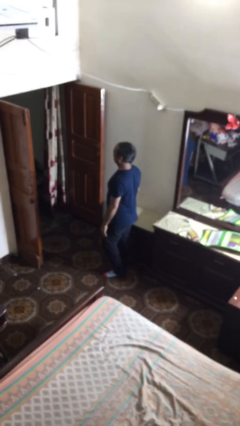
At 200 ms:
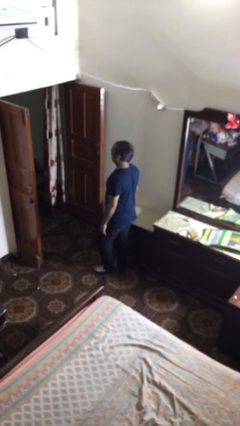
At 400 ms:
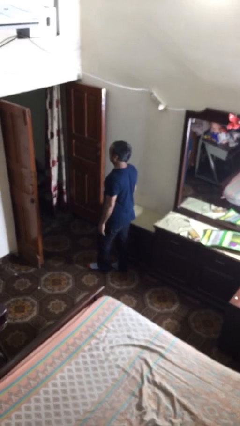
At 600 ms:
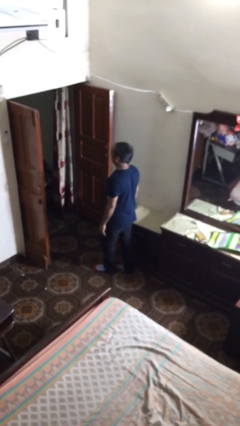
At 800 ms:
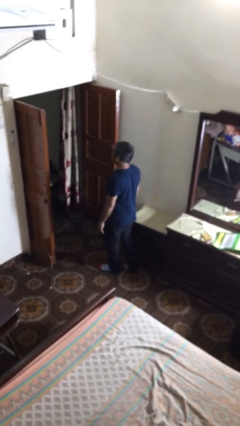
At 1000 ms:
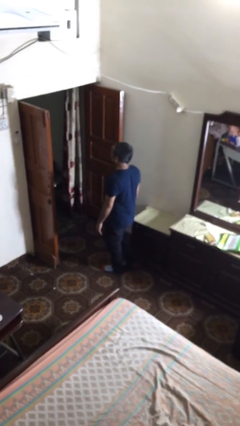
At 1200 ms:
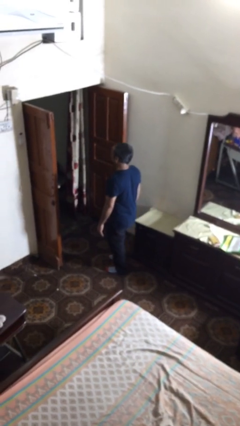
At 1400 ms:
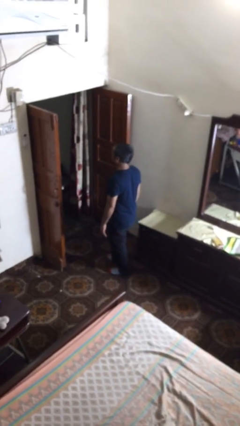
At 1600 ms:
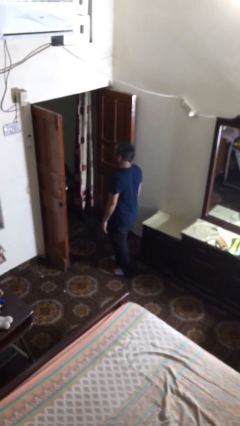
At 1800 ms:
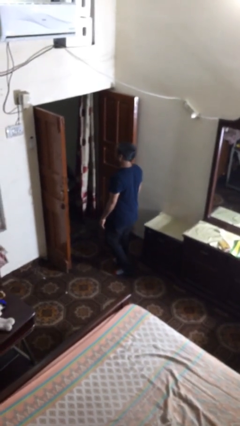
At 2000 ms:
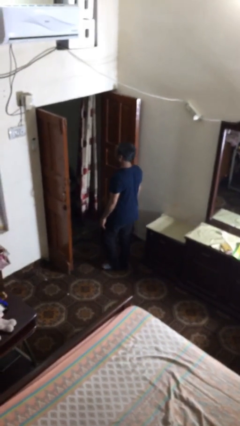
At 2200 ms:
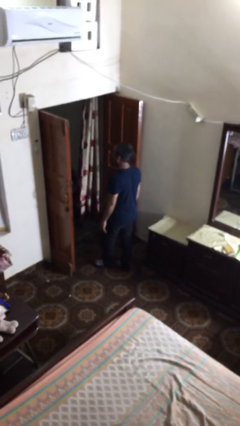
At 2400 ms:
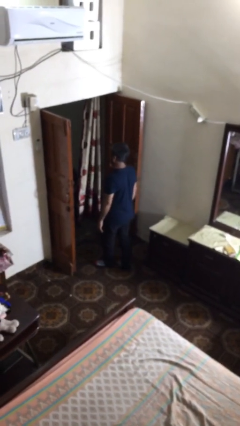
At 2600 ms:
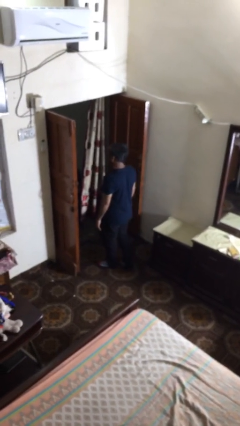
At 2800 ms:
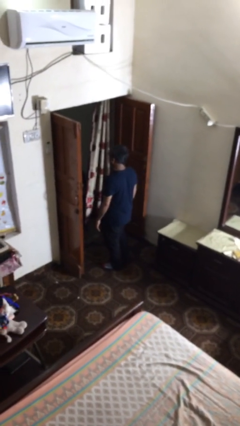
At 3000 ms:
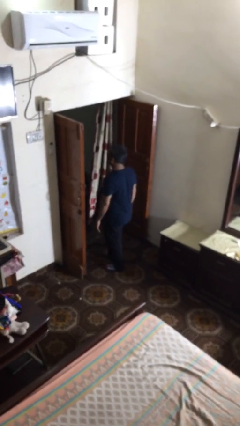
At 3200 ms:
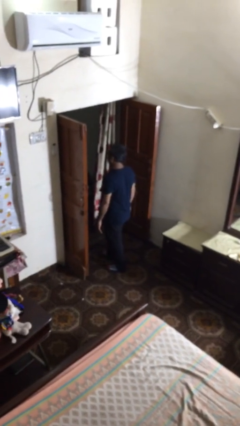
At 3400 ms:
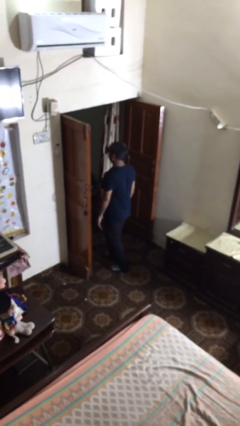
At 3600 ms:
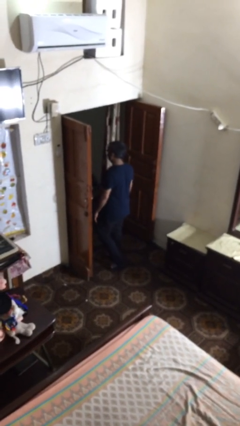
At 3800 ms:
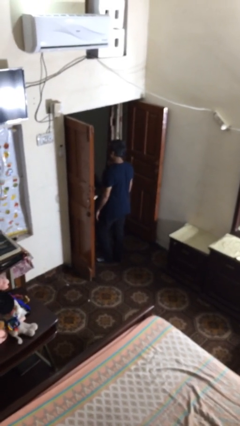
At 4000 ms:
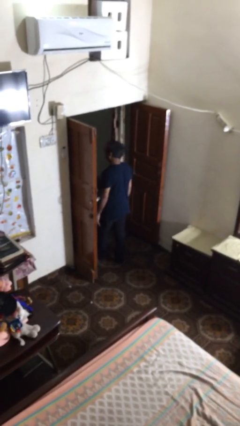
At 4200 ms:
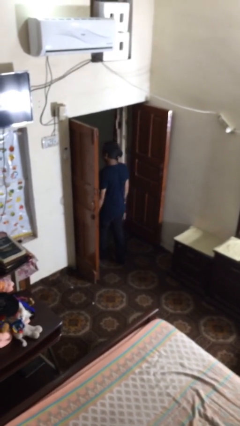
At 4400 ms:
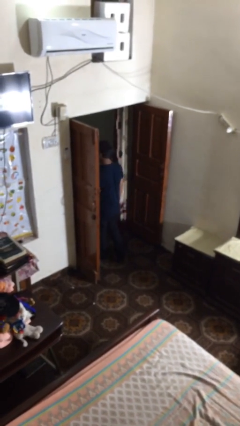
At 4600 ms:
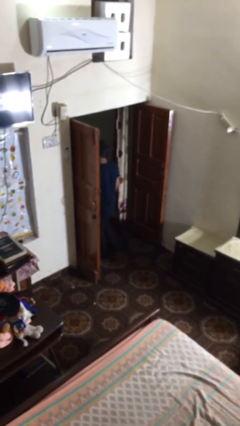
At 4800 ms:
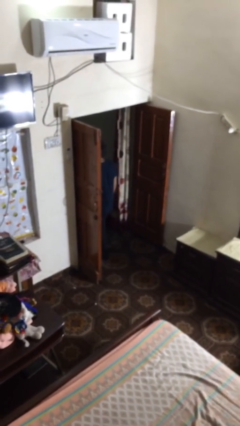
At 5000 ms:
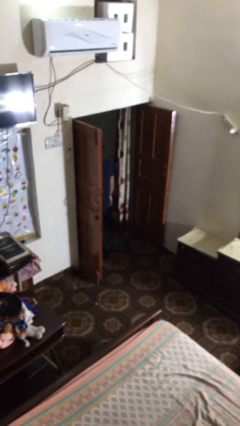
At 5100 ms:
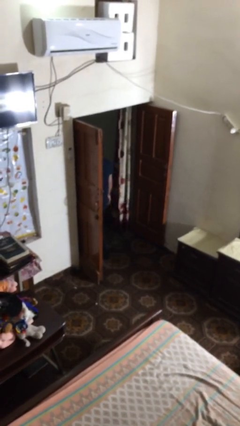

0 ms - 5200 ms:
person exits scene through structure

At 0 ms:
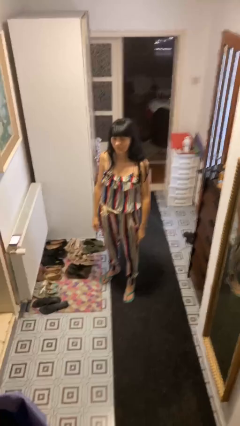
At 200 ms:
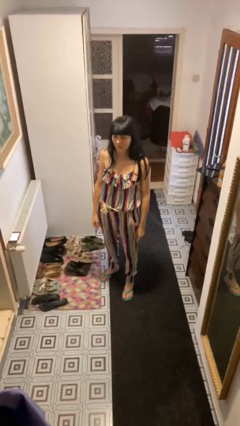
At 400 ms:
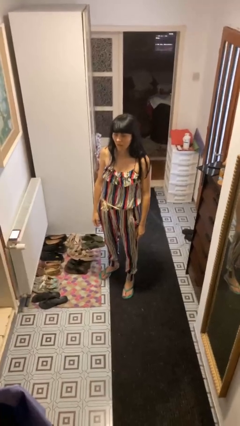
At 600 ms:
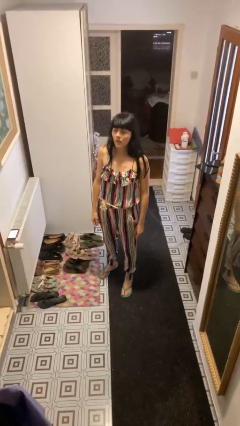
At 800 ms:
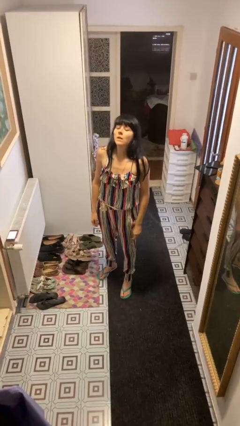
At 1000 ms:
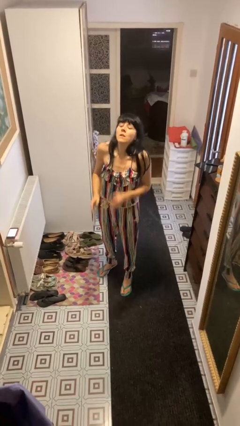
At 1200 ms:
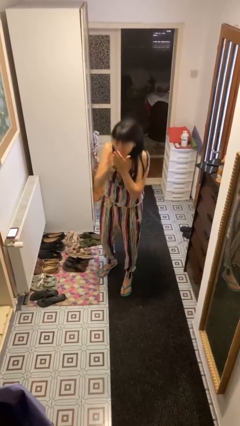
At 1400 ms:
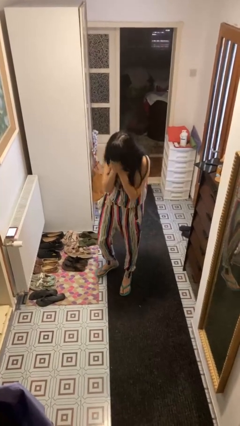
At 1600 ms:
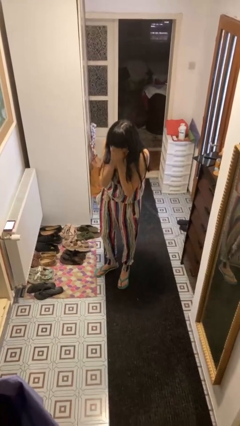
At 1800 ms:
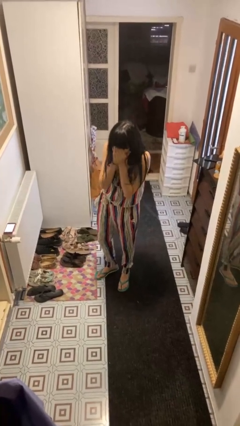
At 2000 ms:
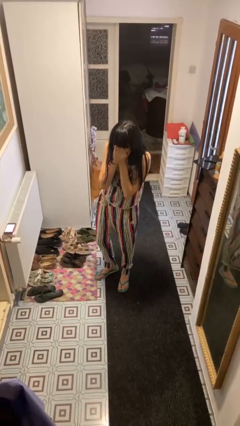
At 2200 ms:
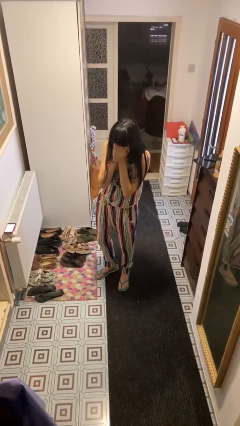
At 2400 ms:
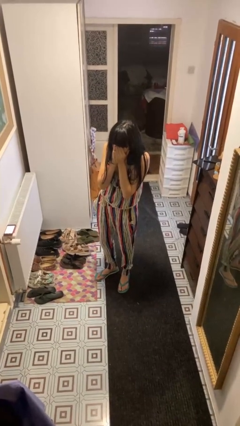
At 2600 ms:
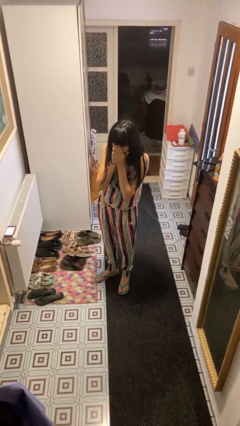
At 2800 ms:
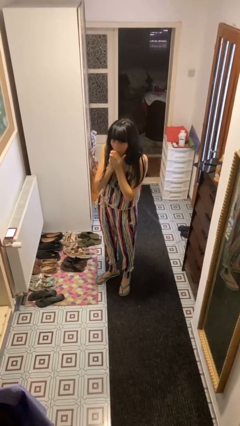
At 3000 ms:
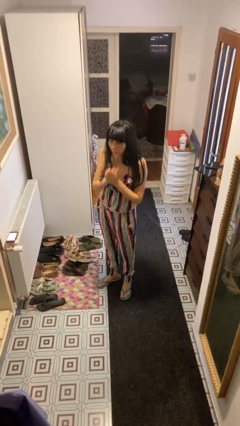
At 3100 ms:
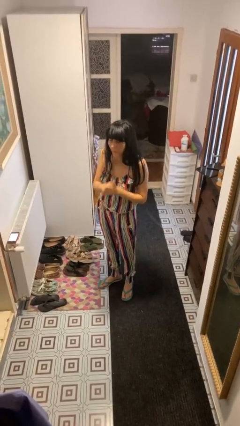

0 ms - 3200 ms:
person sneezes into hand

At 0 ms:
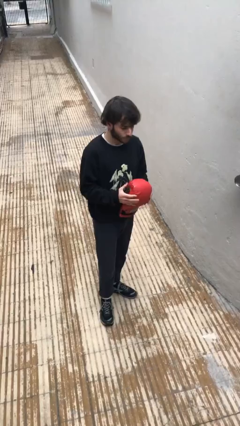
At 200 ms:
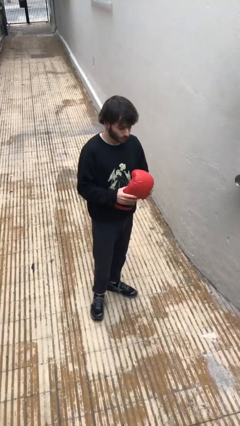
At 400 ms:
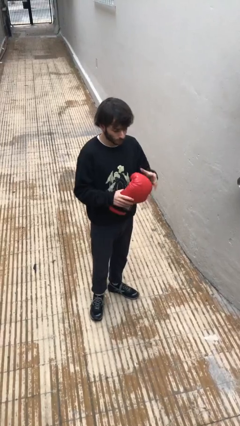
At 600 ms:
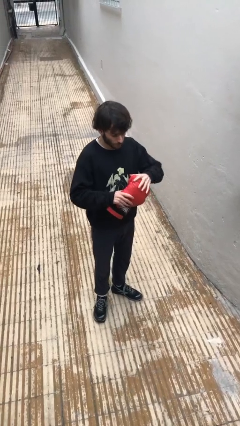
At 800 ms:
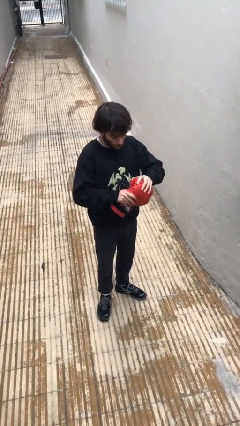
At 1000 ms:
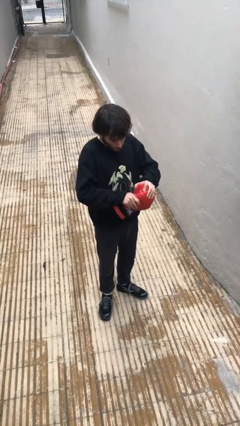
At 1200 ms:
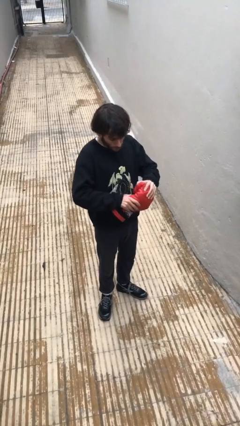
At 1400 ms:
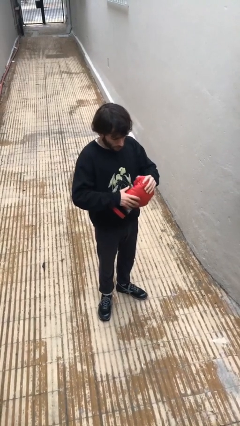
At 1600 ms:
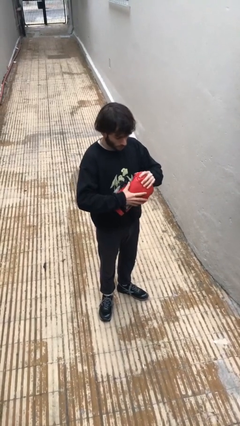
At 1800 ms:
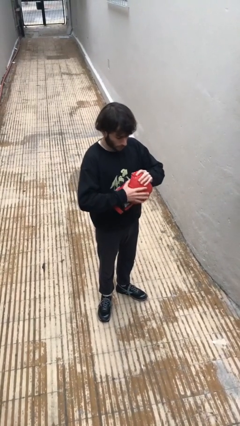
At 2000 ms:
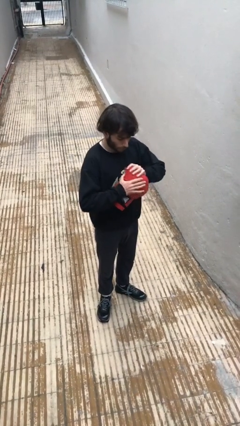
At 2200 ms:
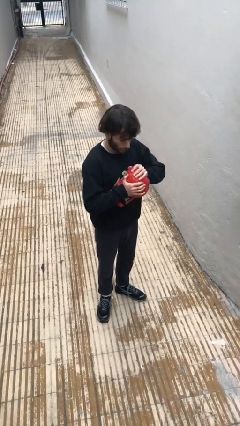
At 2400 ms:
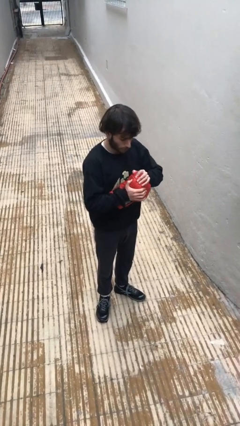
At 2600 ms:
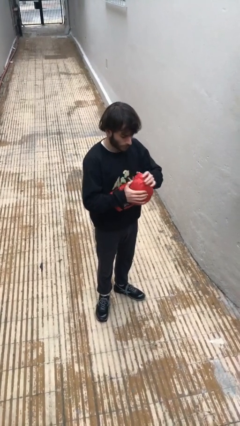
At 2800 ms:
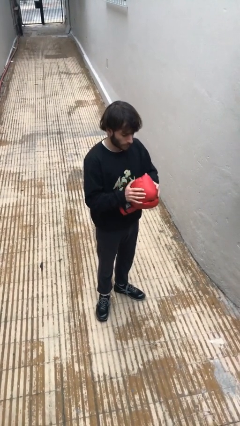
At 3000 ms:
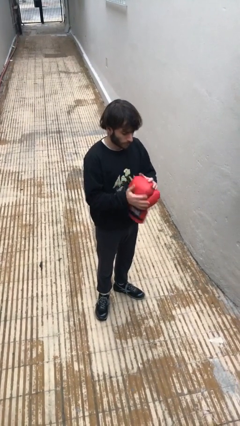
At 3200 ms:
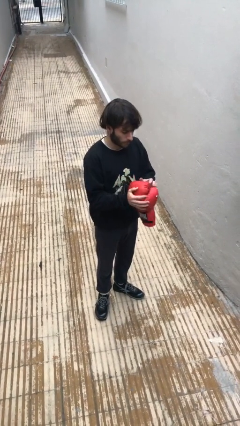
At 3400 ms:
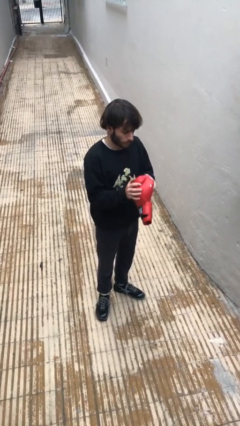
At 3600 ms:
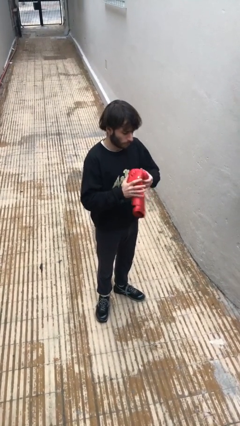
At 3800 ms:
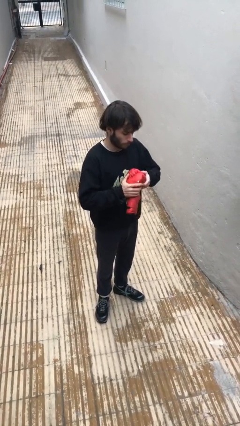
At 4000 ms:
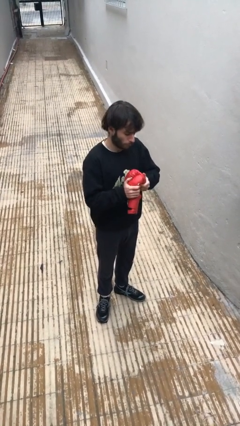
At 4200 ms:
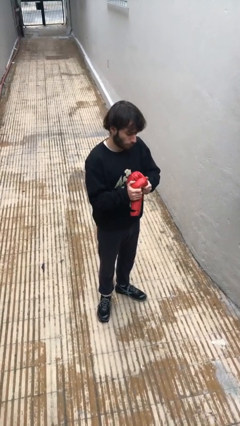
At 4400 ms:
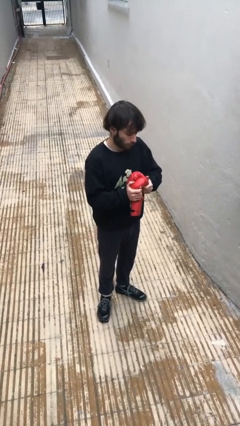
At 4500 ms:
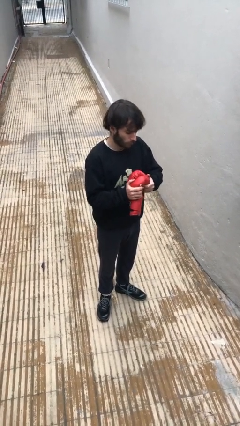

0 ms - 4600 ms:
person squeezes object

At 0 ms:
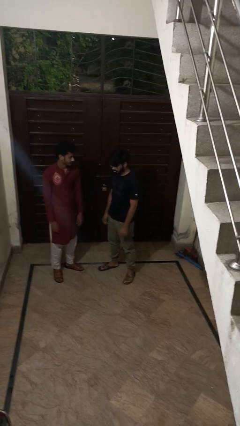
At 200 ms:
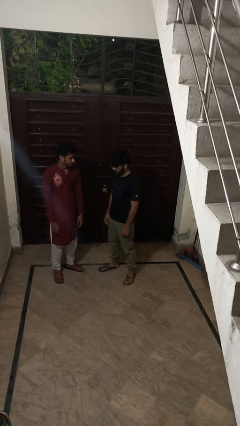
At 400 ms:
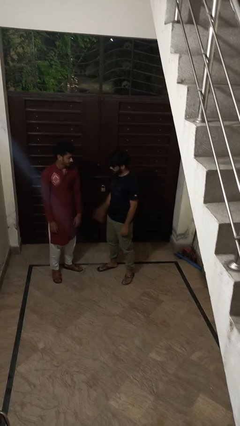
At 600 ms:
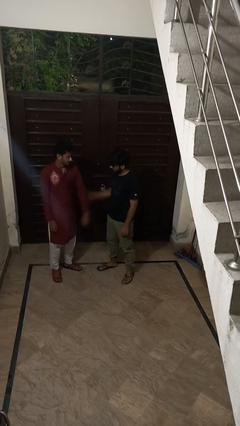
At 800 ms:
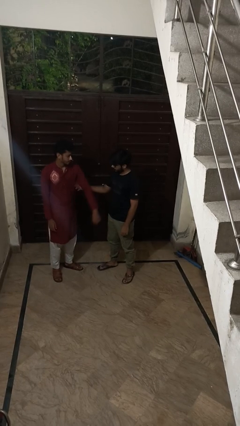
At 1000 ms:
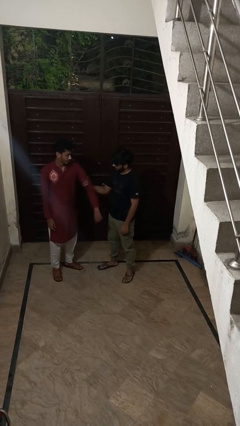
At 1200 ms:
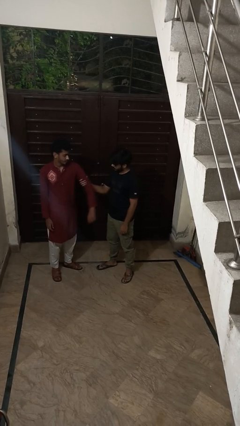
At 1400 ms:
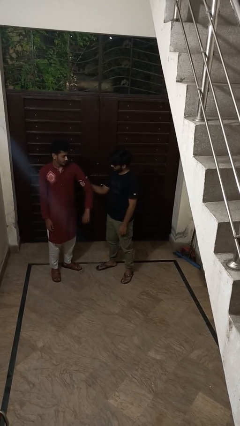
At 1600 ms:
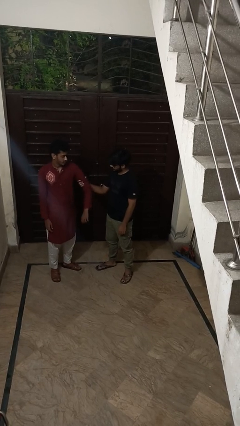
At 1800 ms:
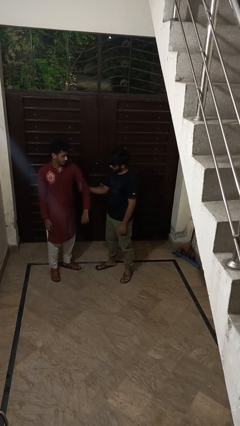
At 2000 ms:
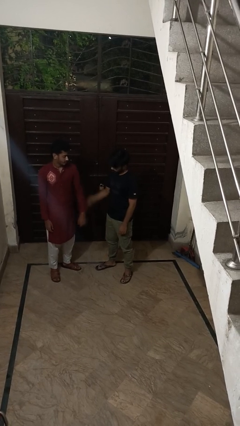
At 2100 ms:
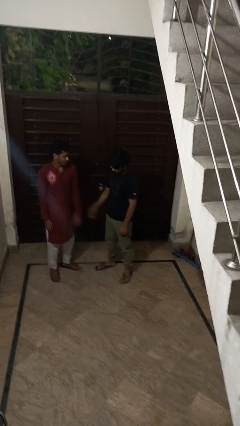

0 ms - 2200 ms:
person grabs person by bicep

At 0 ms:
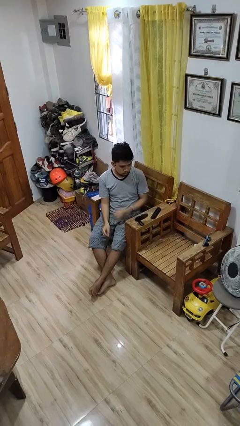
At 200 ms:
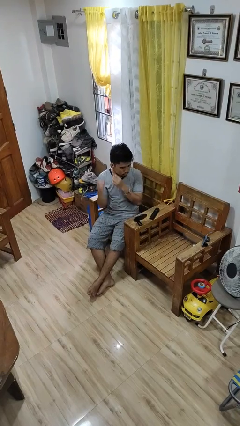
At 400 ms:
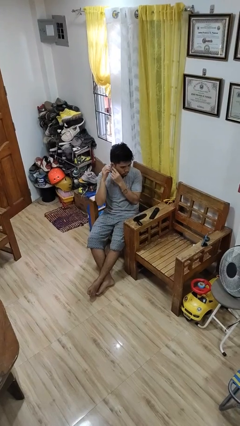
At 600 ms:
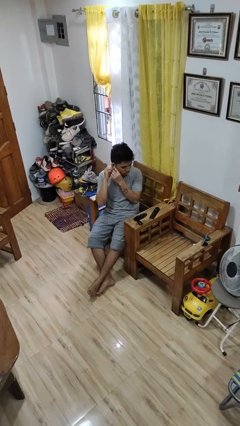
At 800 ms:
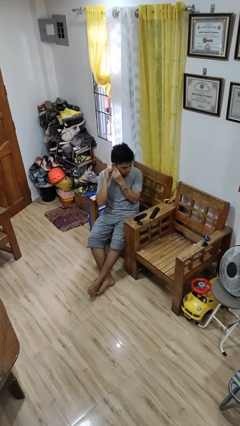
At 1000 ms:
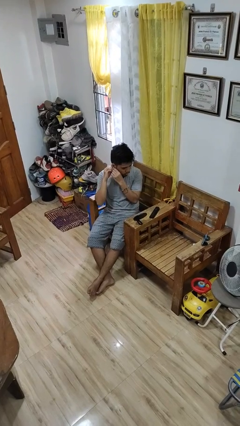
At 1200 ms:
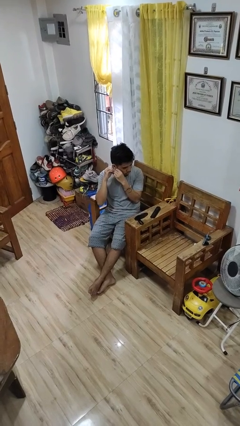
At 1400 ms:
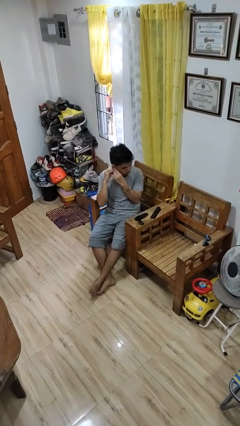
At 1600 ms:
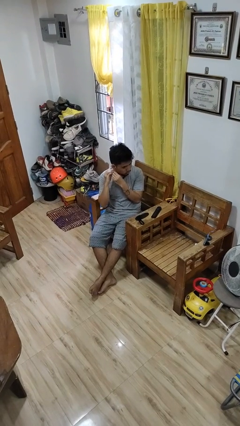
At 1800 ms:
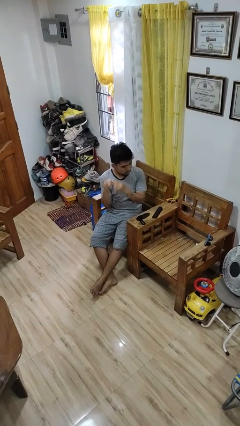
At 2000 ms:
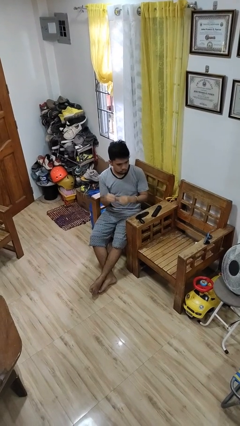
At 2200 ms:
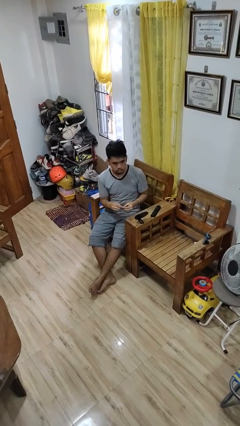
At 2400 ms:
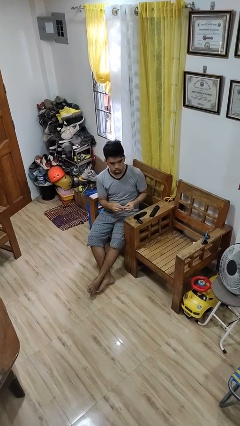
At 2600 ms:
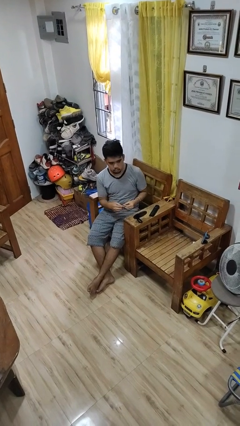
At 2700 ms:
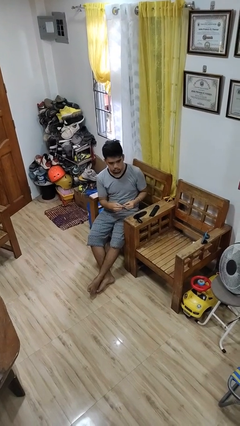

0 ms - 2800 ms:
person takes off earrings

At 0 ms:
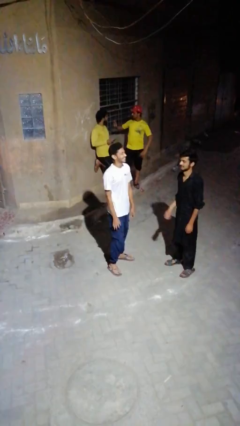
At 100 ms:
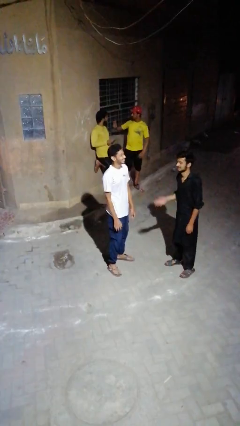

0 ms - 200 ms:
person laughs with person
